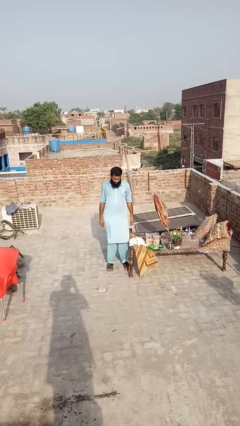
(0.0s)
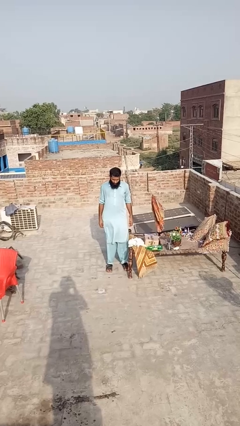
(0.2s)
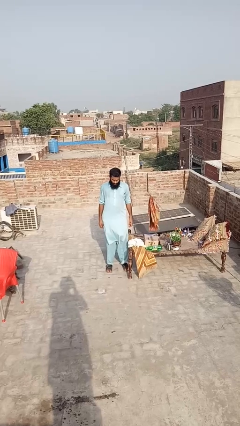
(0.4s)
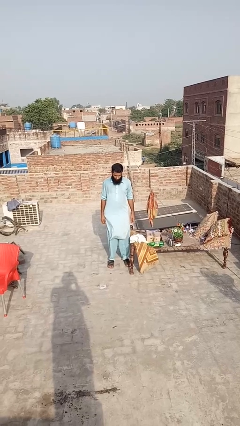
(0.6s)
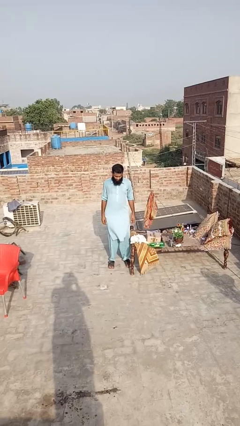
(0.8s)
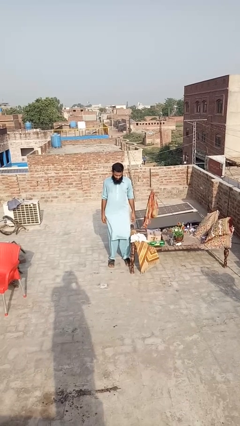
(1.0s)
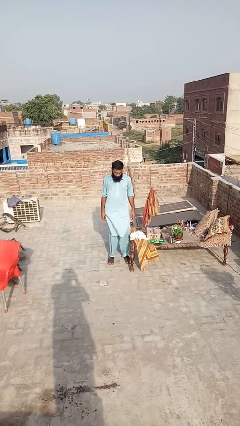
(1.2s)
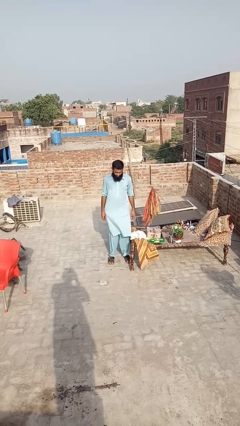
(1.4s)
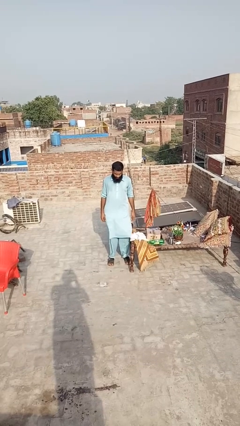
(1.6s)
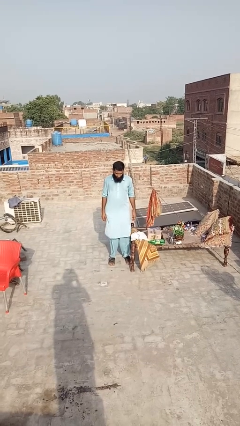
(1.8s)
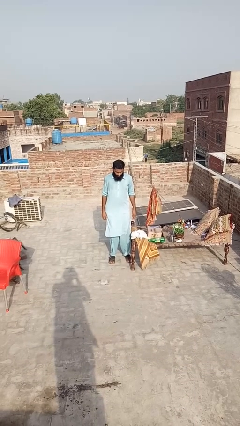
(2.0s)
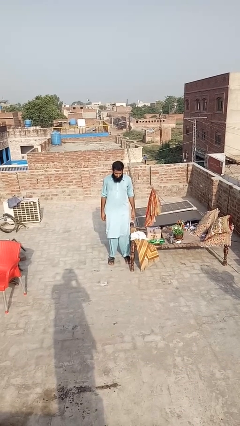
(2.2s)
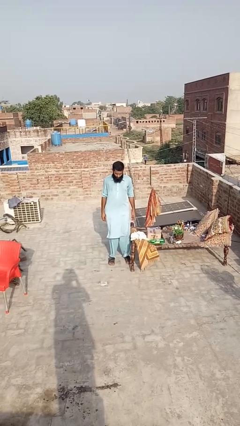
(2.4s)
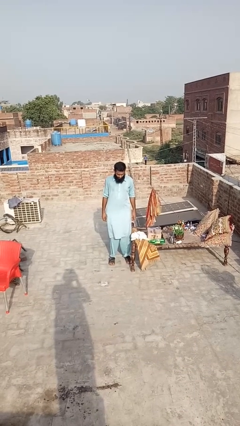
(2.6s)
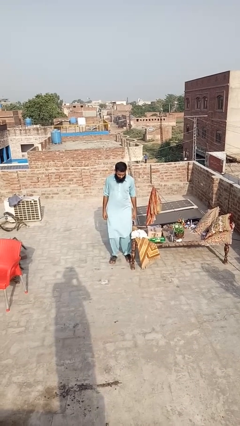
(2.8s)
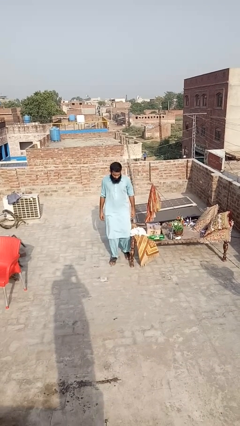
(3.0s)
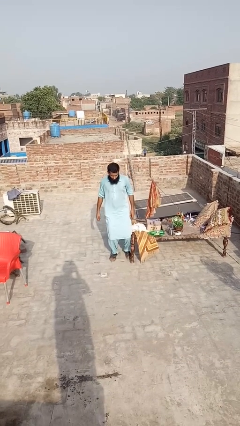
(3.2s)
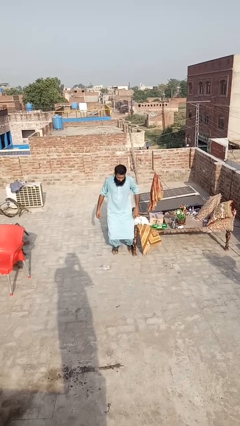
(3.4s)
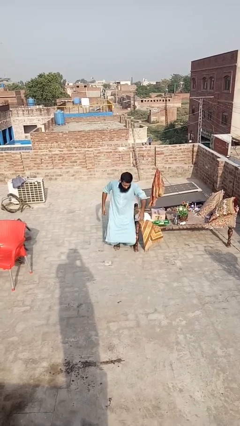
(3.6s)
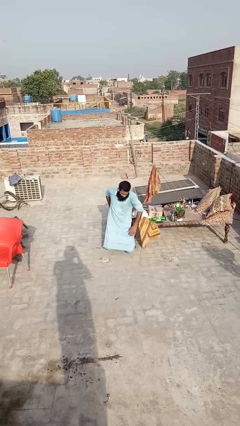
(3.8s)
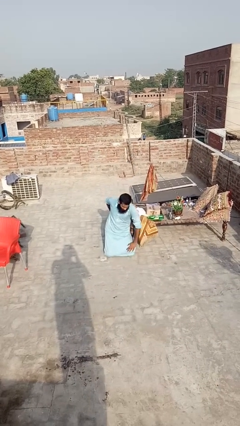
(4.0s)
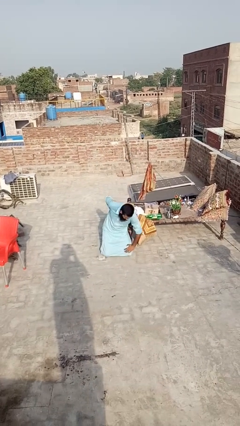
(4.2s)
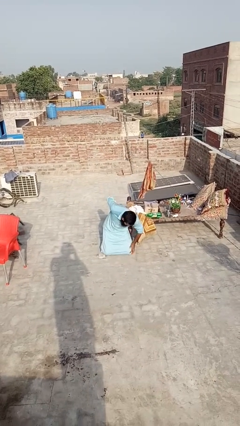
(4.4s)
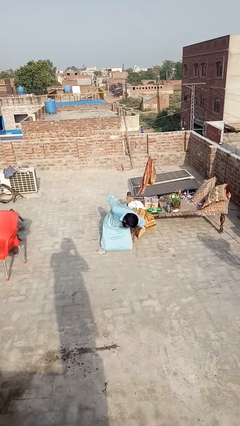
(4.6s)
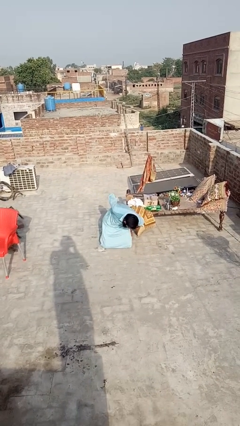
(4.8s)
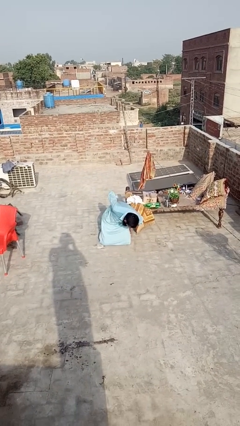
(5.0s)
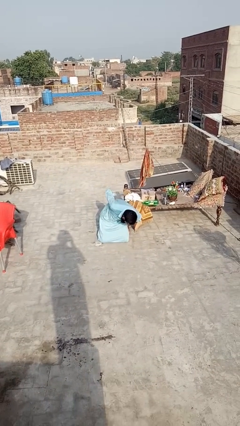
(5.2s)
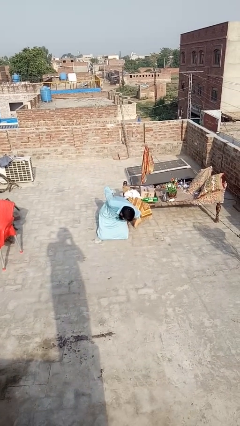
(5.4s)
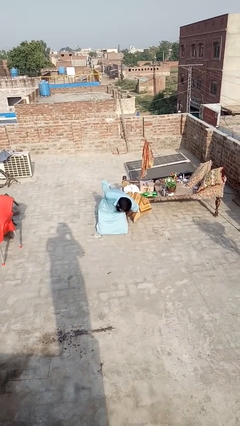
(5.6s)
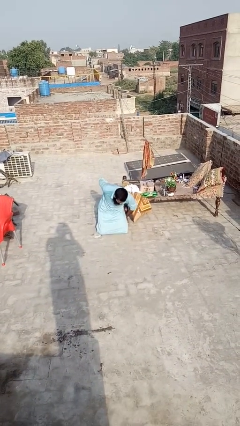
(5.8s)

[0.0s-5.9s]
person bumps into table

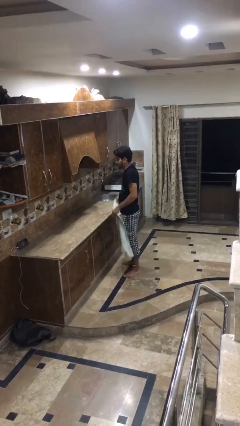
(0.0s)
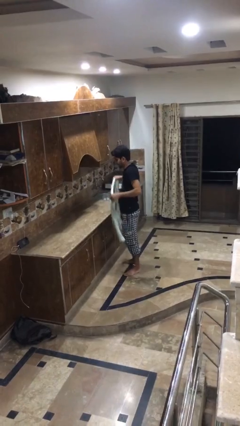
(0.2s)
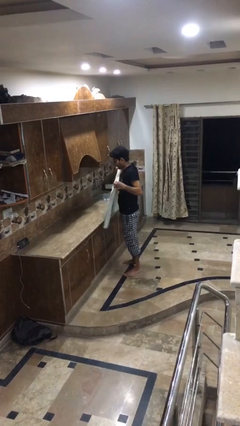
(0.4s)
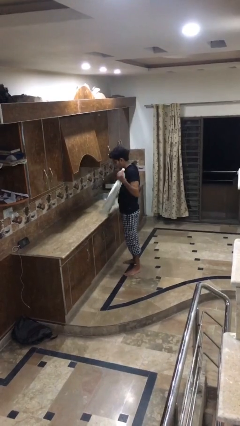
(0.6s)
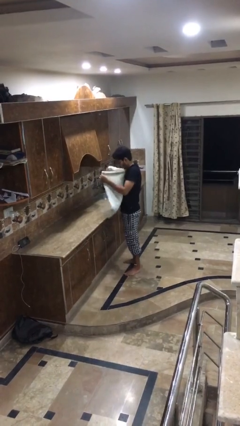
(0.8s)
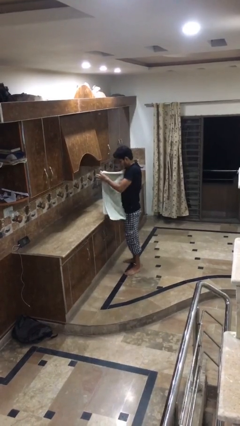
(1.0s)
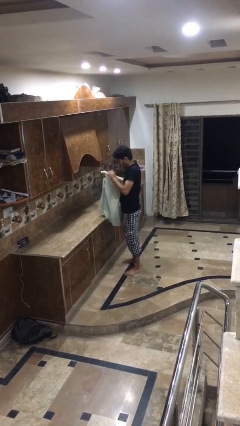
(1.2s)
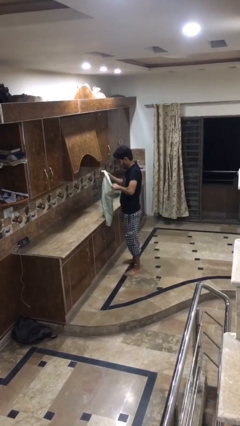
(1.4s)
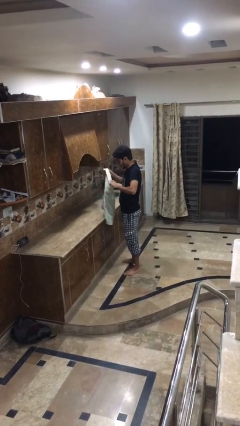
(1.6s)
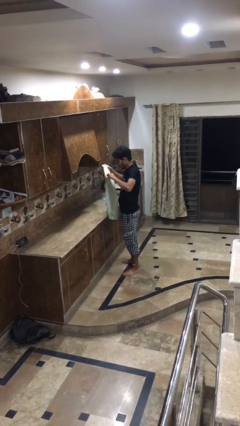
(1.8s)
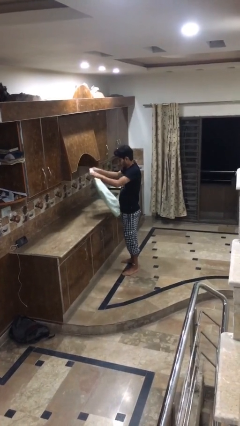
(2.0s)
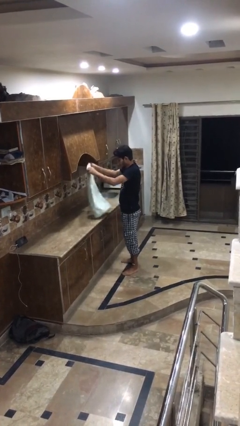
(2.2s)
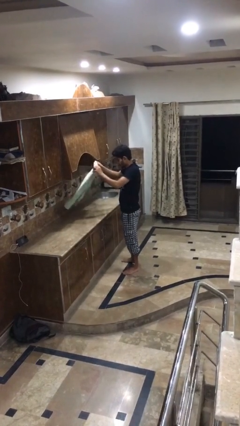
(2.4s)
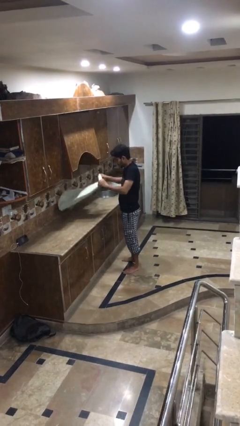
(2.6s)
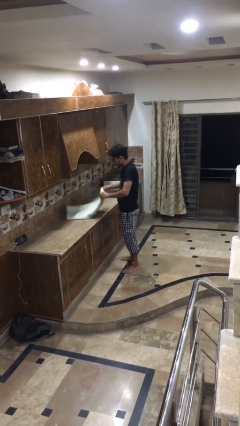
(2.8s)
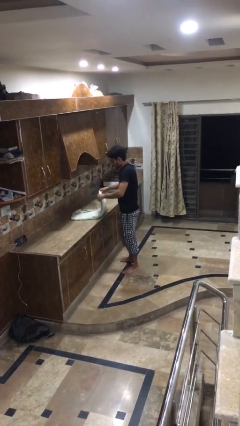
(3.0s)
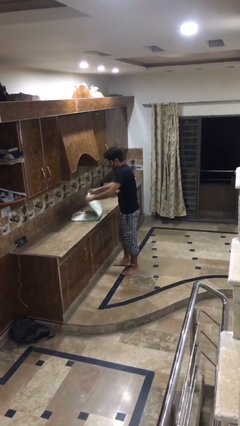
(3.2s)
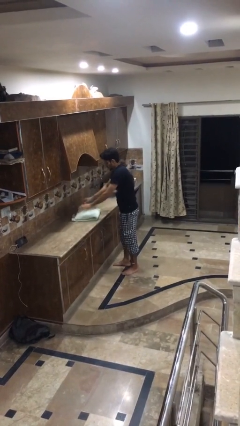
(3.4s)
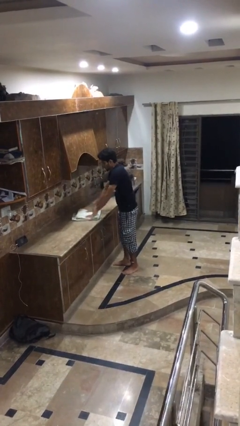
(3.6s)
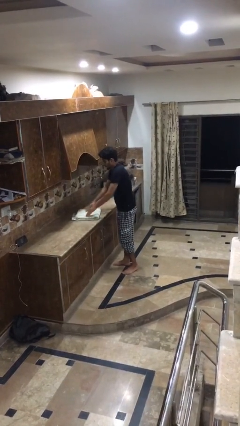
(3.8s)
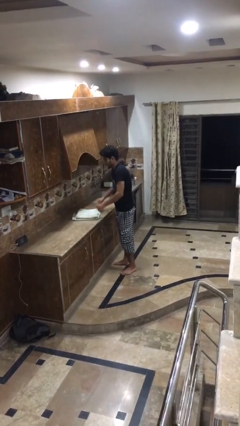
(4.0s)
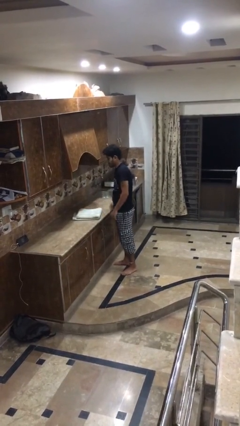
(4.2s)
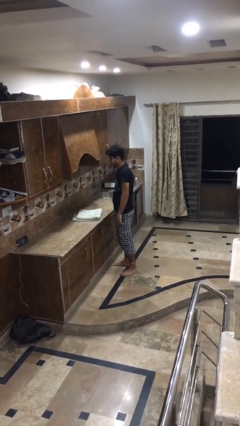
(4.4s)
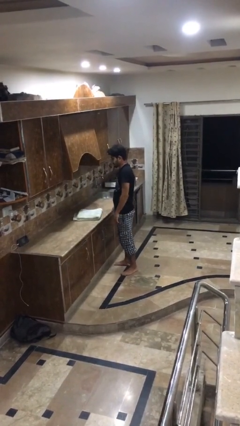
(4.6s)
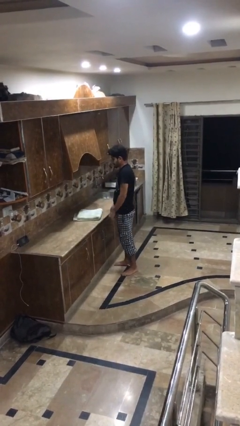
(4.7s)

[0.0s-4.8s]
person folds towel

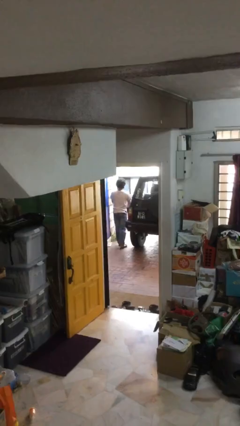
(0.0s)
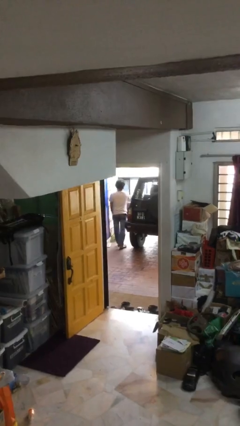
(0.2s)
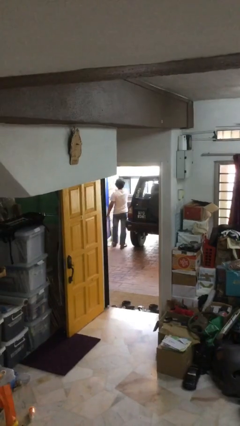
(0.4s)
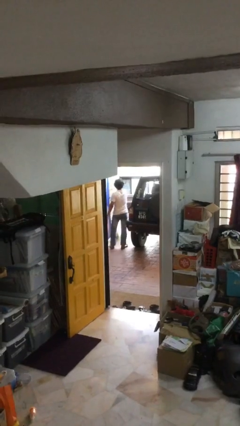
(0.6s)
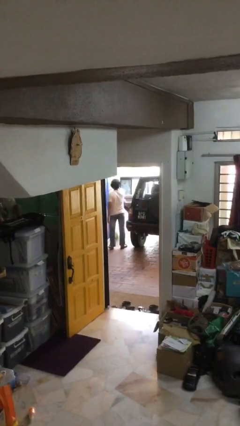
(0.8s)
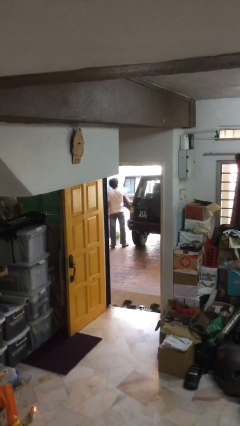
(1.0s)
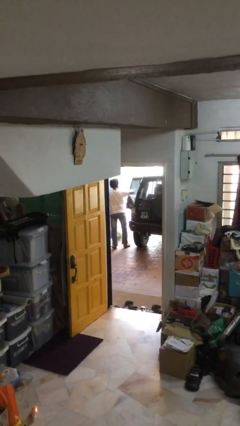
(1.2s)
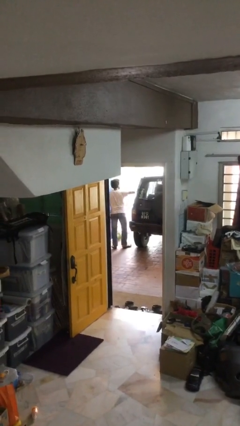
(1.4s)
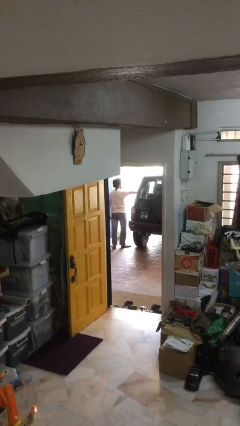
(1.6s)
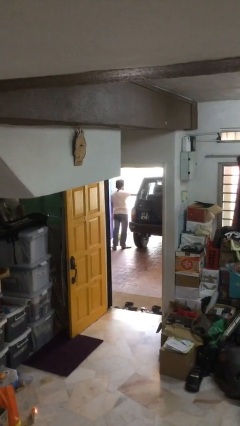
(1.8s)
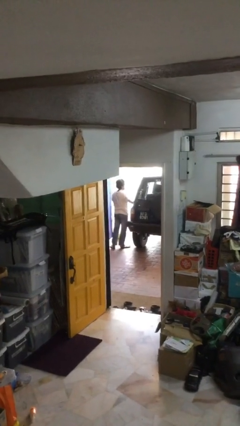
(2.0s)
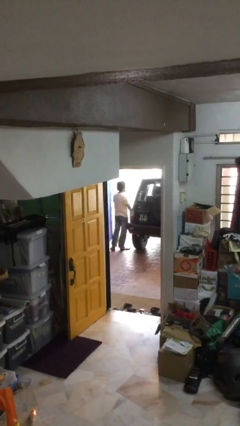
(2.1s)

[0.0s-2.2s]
person closes car door

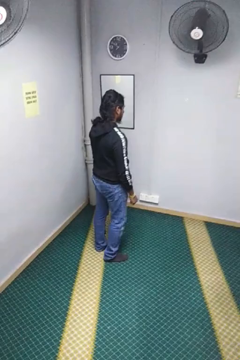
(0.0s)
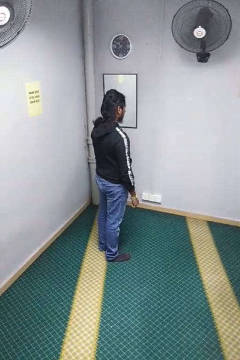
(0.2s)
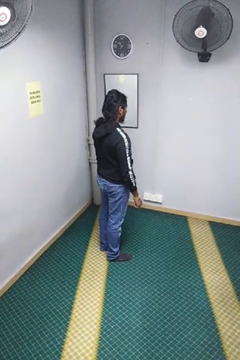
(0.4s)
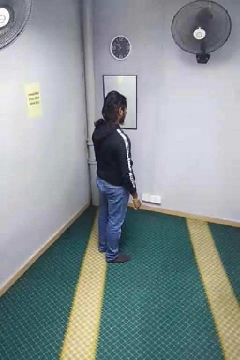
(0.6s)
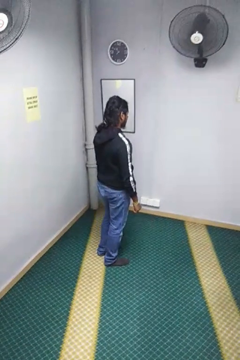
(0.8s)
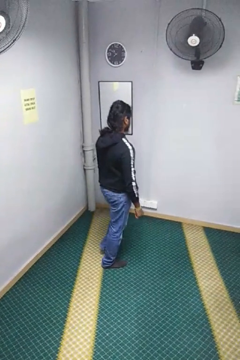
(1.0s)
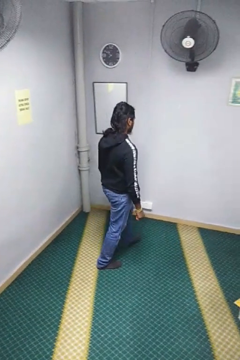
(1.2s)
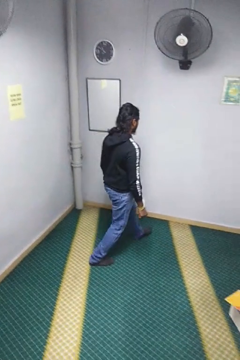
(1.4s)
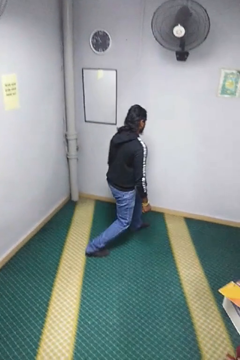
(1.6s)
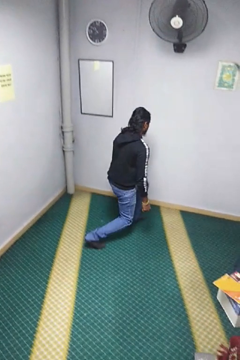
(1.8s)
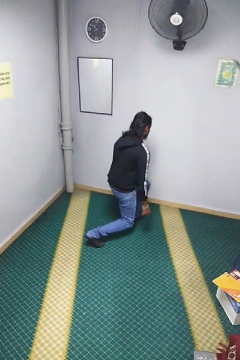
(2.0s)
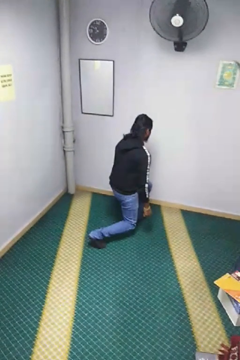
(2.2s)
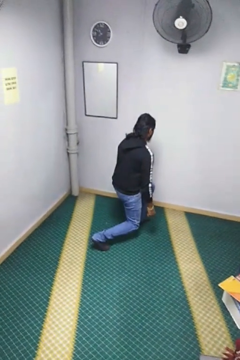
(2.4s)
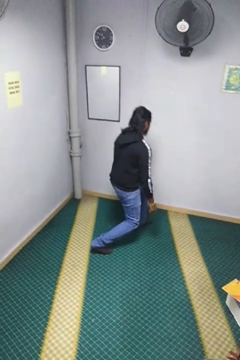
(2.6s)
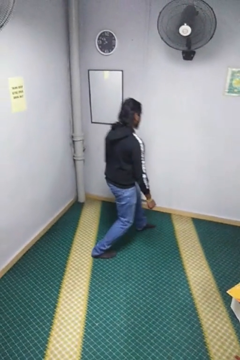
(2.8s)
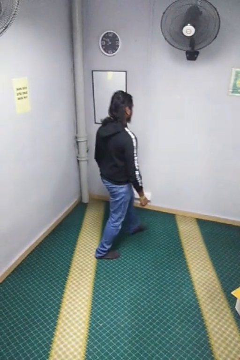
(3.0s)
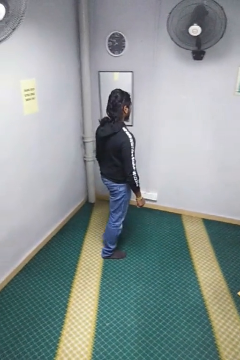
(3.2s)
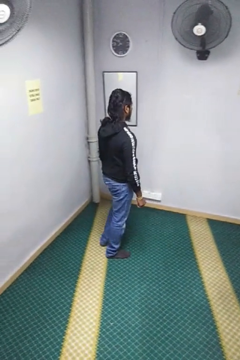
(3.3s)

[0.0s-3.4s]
person exercises with lunges

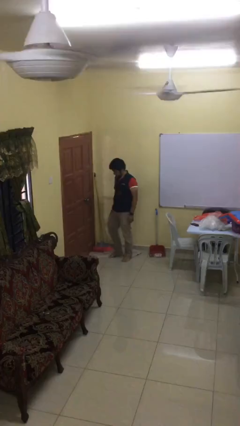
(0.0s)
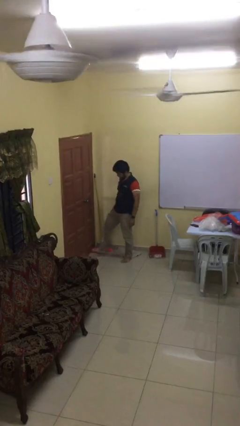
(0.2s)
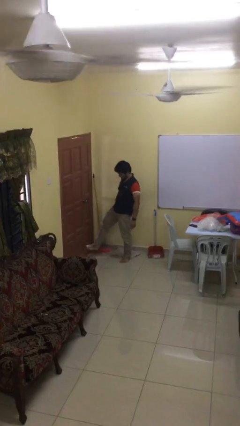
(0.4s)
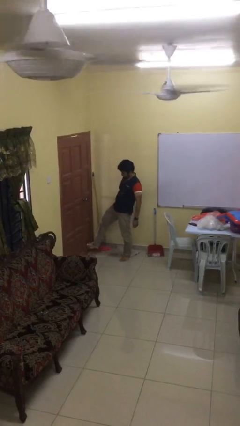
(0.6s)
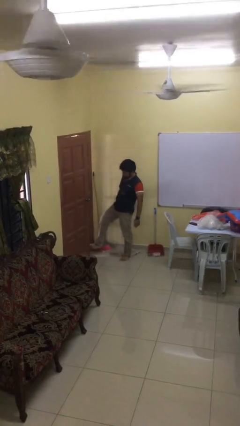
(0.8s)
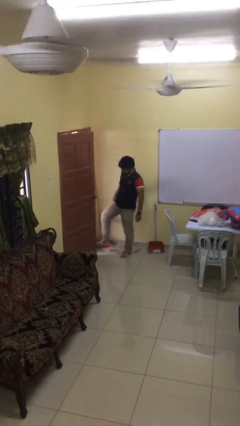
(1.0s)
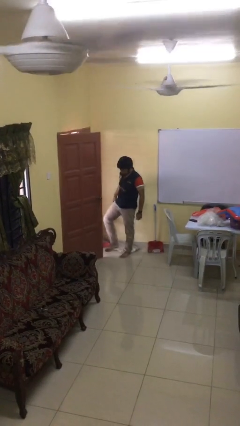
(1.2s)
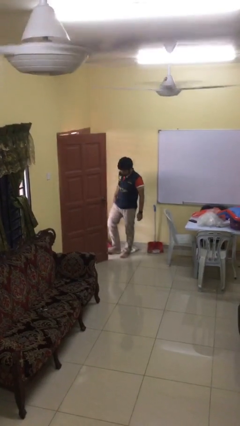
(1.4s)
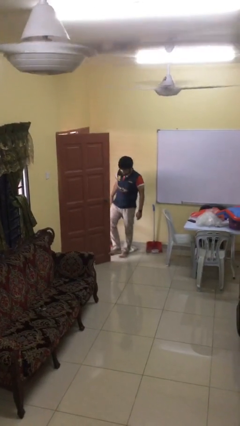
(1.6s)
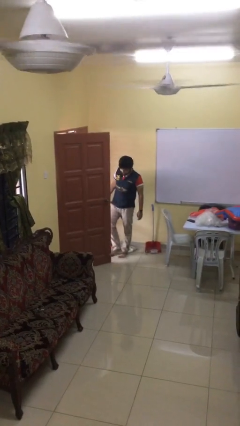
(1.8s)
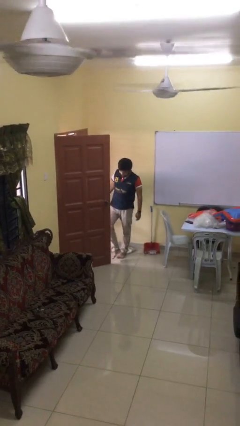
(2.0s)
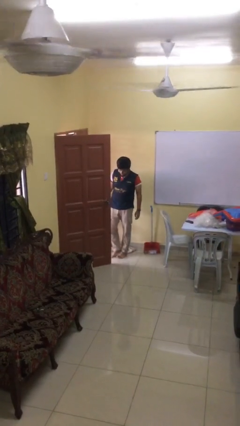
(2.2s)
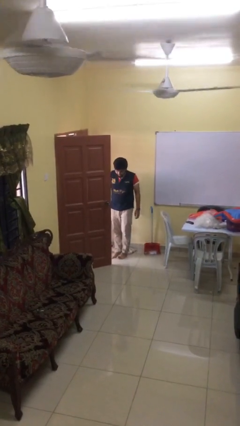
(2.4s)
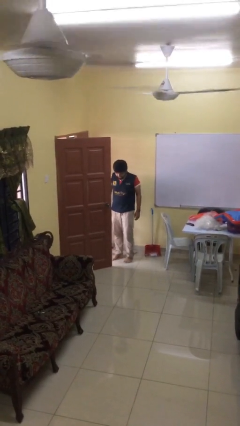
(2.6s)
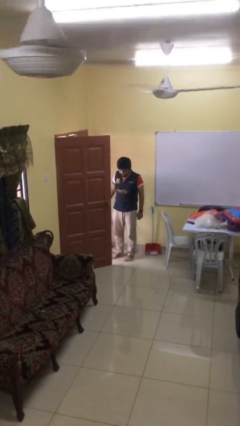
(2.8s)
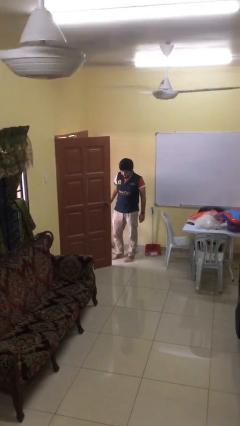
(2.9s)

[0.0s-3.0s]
person opens facility door
